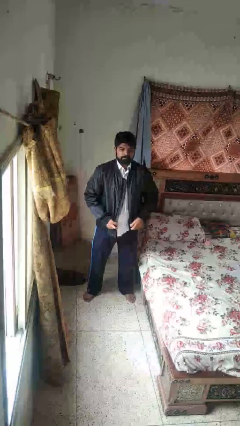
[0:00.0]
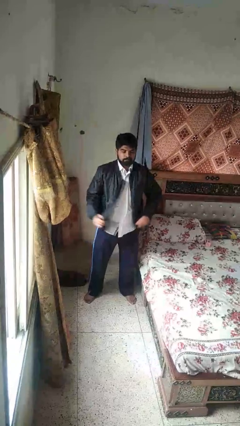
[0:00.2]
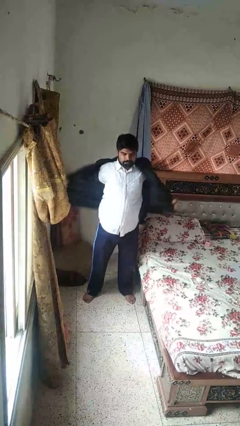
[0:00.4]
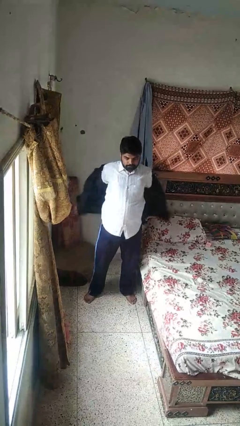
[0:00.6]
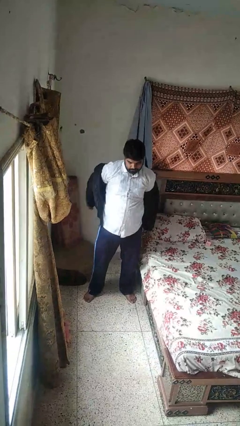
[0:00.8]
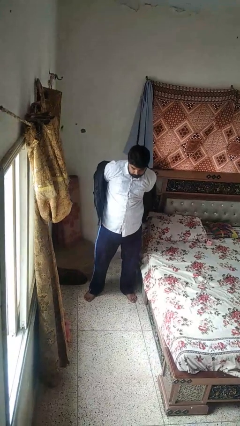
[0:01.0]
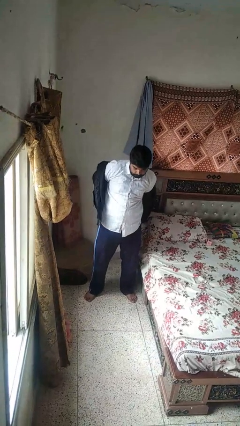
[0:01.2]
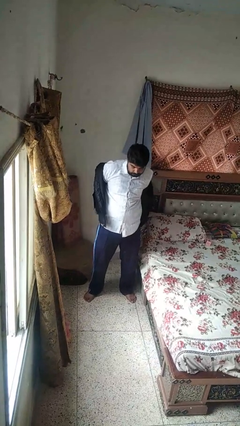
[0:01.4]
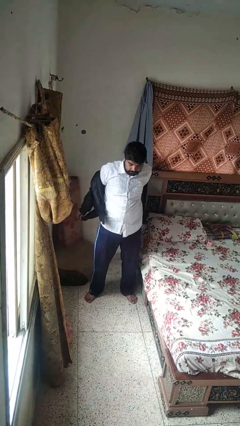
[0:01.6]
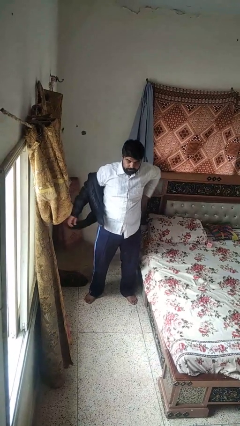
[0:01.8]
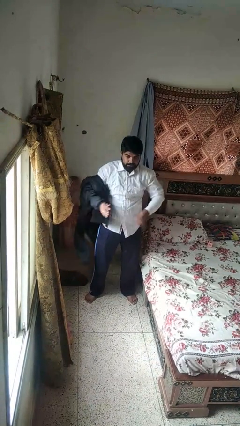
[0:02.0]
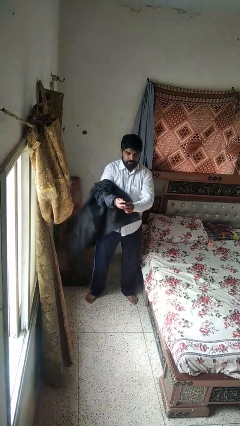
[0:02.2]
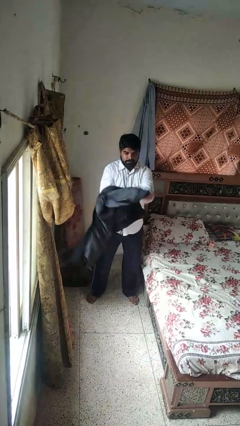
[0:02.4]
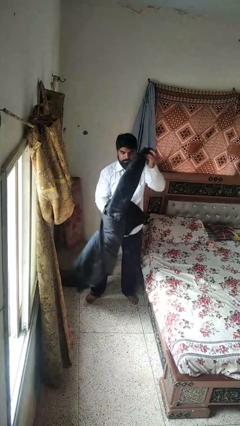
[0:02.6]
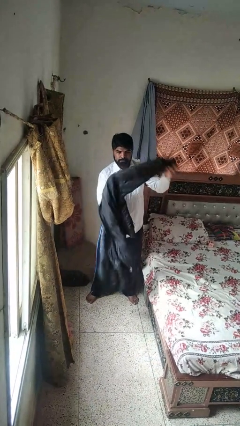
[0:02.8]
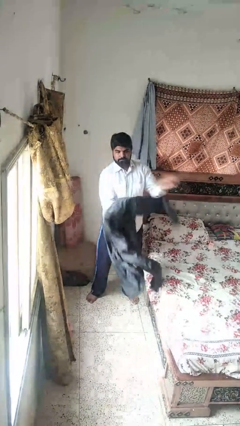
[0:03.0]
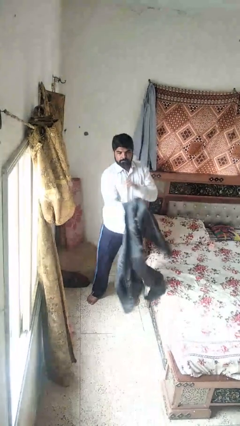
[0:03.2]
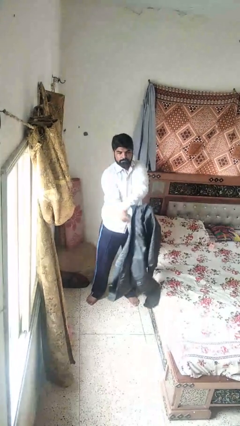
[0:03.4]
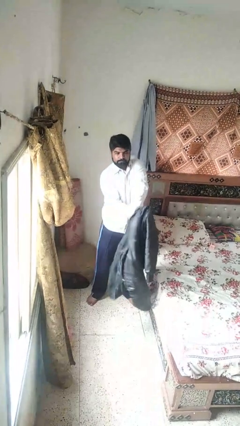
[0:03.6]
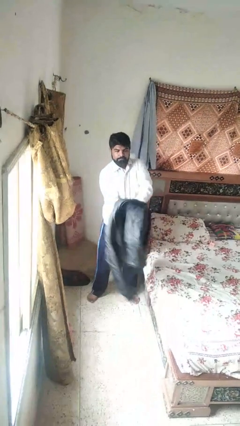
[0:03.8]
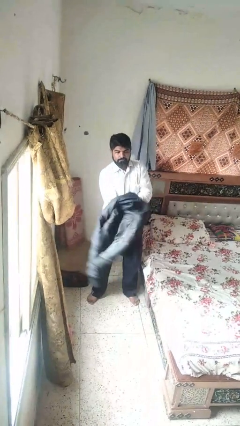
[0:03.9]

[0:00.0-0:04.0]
person takes off jacket

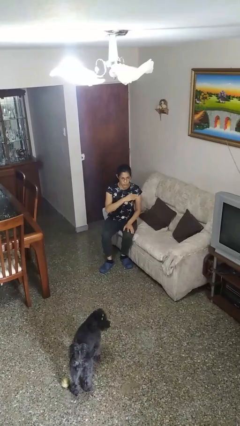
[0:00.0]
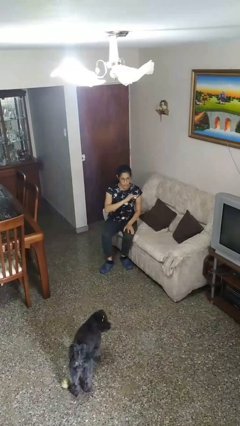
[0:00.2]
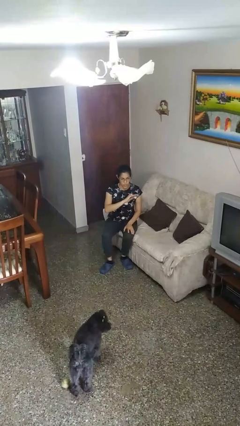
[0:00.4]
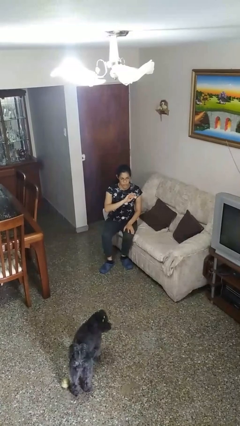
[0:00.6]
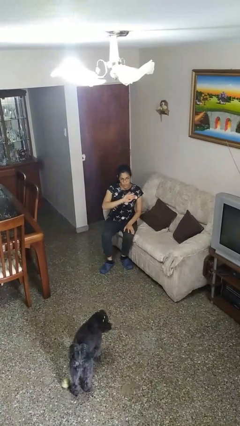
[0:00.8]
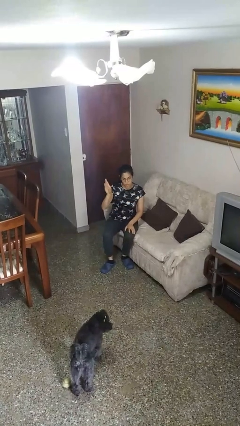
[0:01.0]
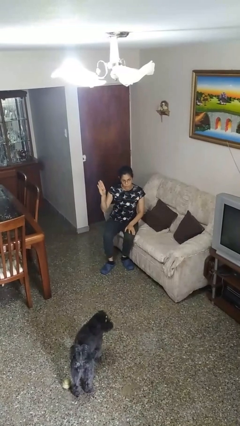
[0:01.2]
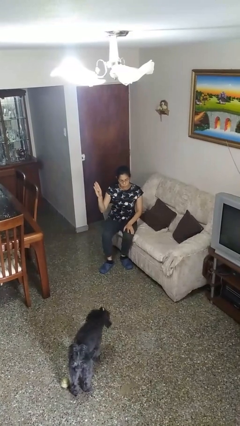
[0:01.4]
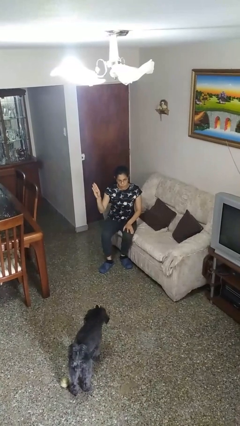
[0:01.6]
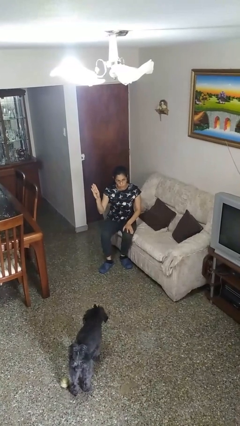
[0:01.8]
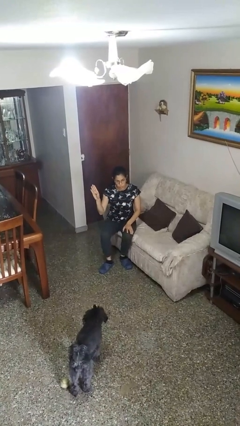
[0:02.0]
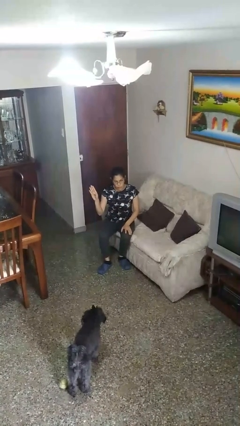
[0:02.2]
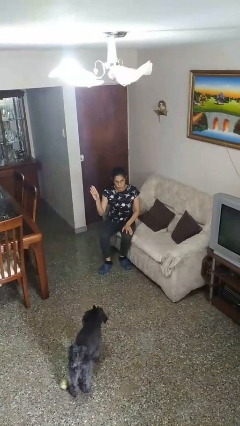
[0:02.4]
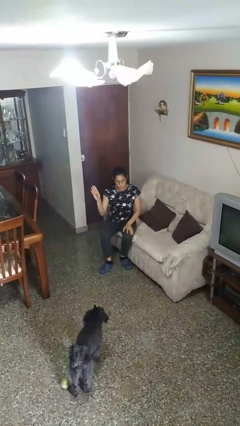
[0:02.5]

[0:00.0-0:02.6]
person gestures swipe right

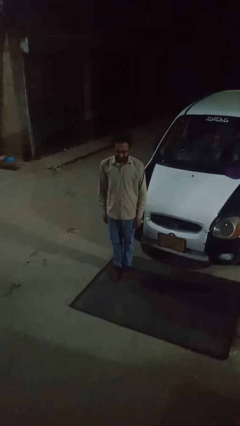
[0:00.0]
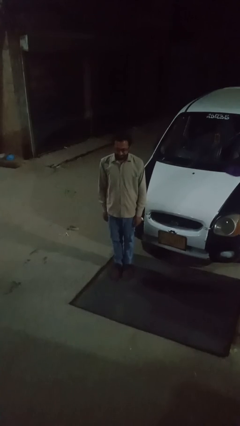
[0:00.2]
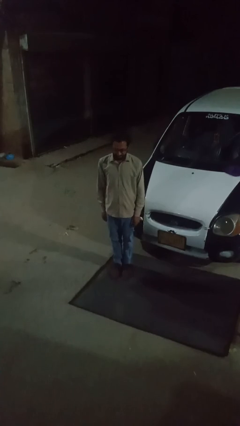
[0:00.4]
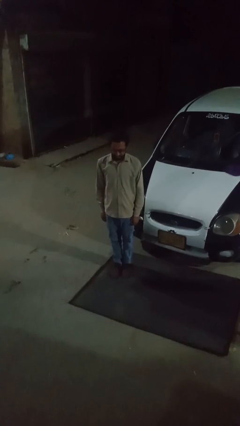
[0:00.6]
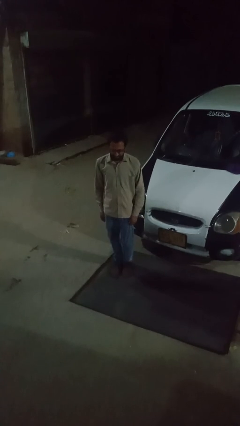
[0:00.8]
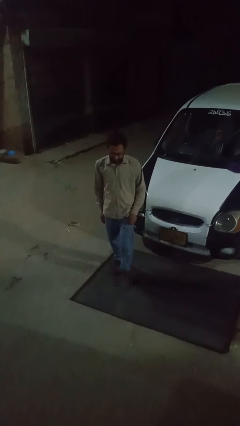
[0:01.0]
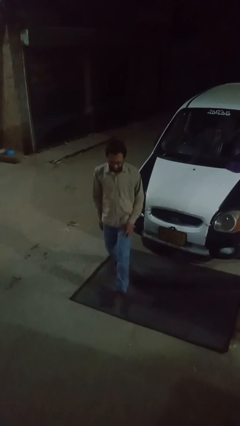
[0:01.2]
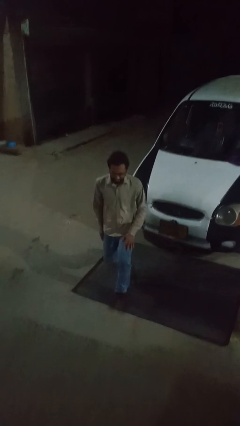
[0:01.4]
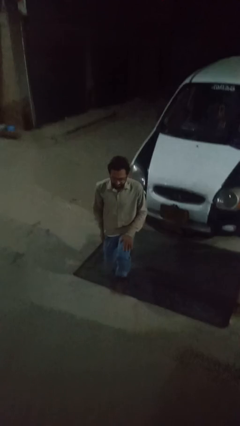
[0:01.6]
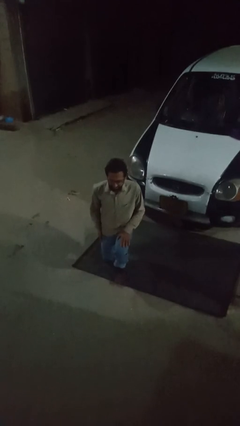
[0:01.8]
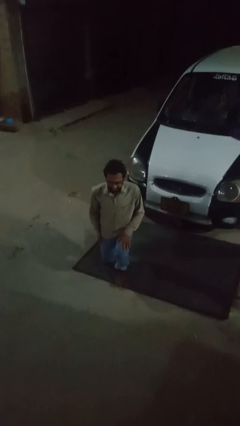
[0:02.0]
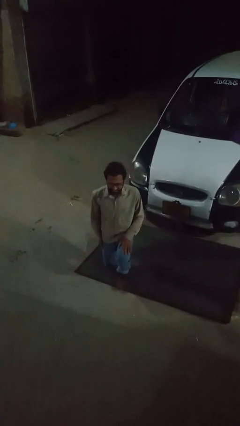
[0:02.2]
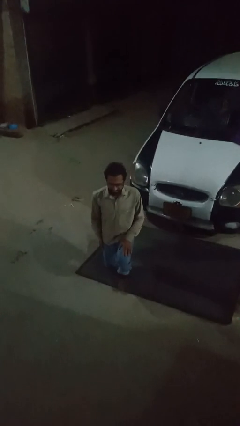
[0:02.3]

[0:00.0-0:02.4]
person squats

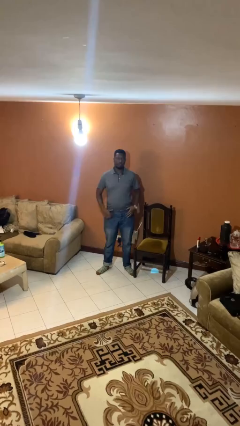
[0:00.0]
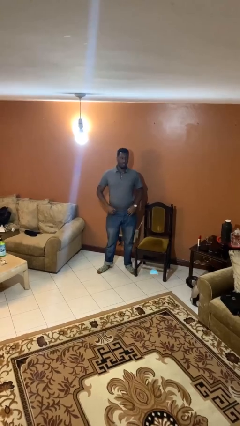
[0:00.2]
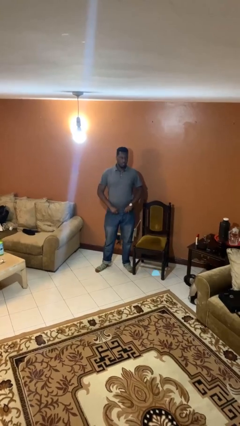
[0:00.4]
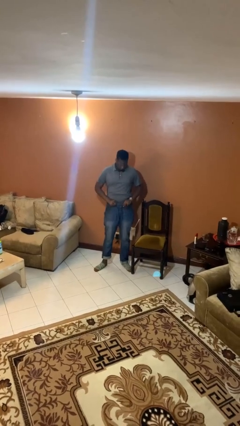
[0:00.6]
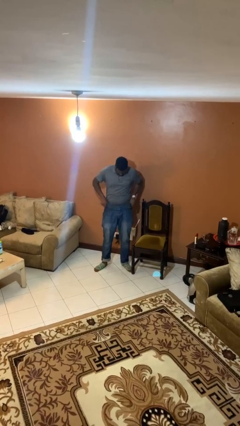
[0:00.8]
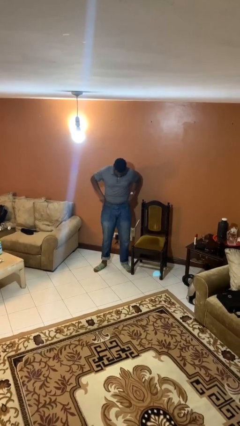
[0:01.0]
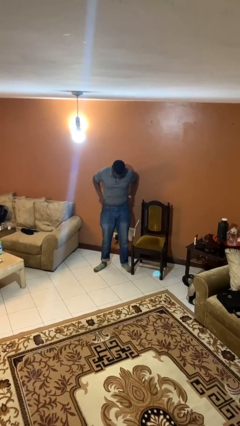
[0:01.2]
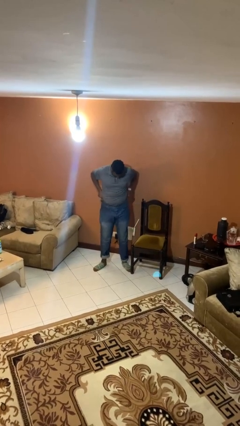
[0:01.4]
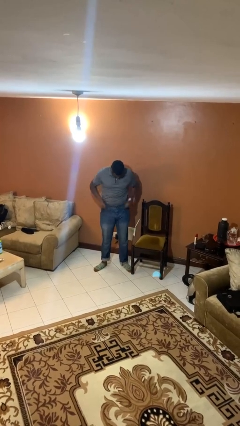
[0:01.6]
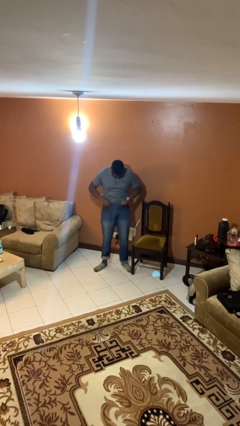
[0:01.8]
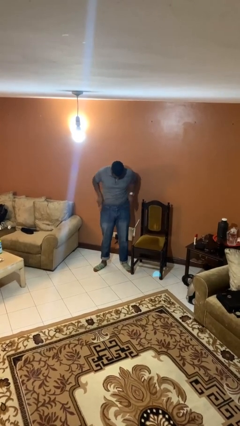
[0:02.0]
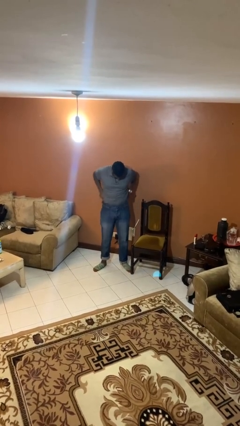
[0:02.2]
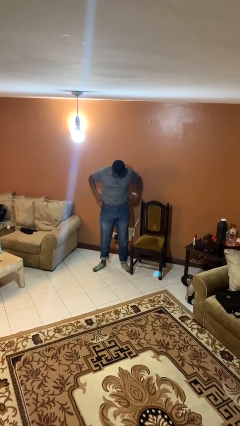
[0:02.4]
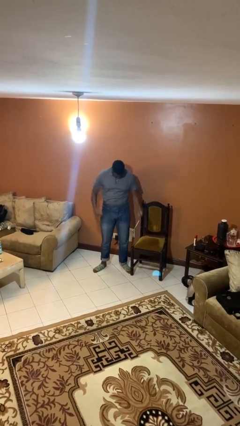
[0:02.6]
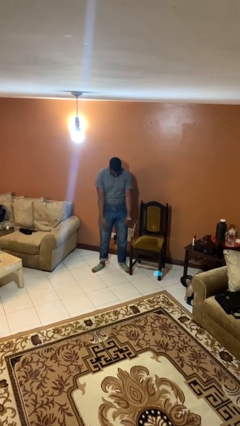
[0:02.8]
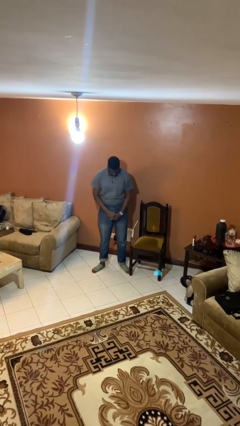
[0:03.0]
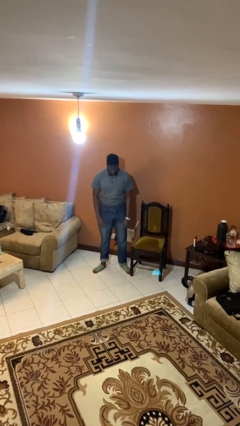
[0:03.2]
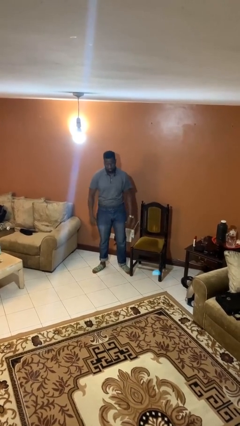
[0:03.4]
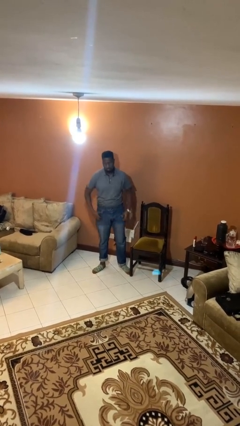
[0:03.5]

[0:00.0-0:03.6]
person hikes up pants

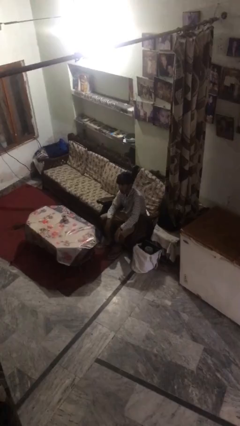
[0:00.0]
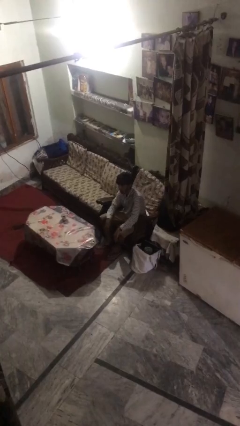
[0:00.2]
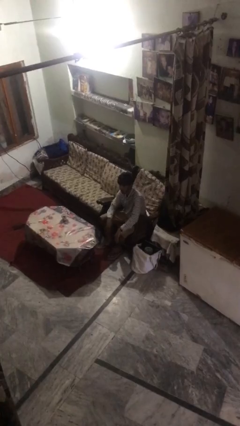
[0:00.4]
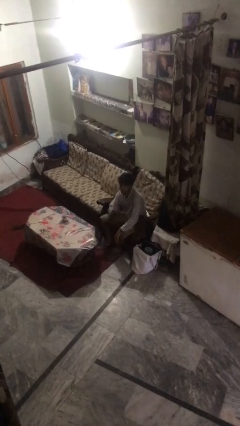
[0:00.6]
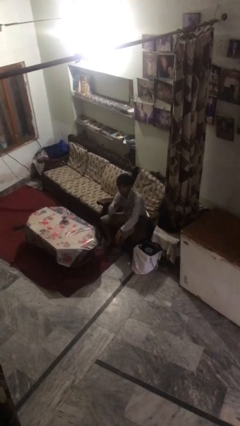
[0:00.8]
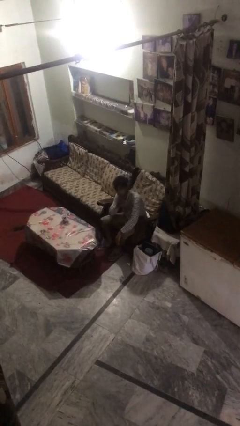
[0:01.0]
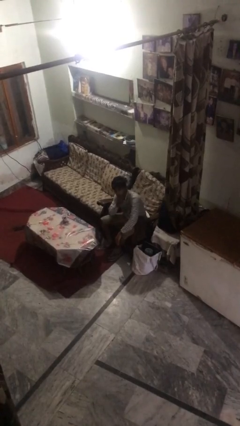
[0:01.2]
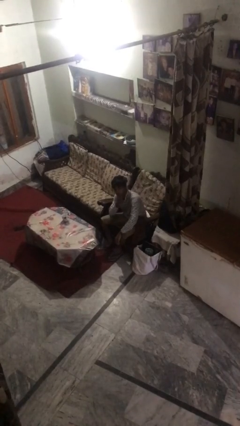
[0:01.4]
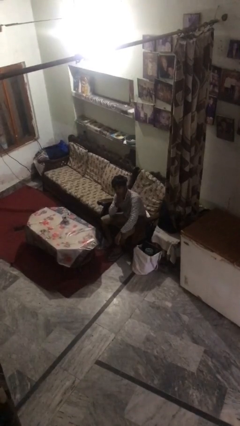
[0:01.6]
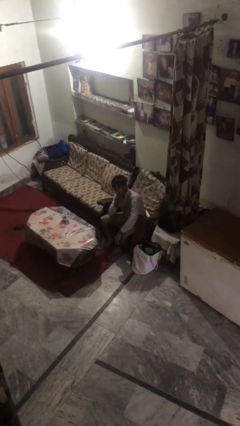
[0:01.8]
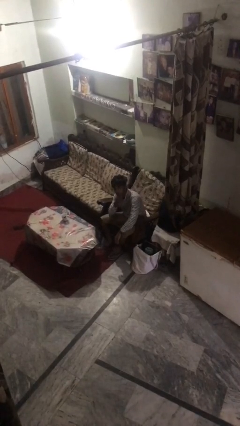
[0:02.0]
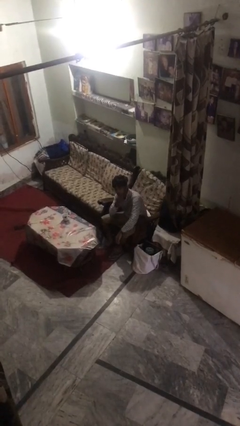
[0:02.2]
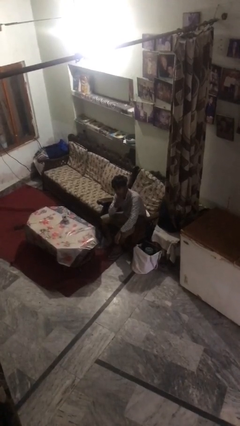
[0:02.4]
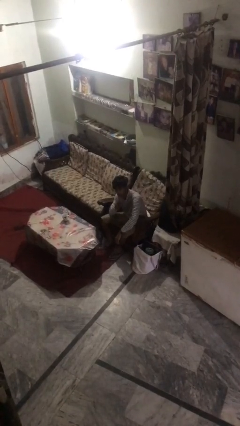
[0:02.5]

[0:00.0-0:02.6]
person strokes chin

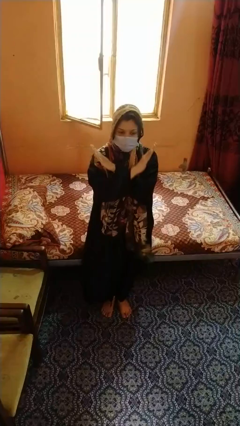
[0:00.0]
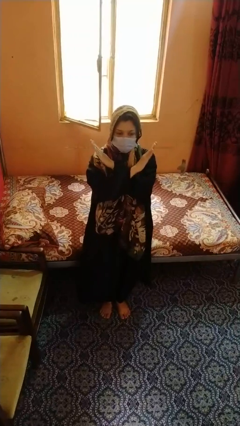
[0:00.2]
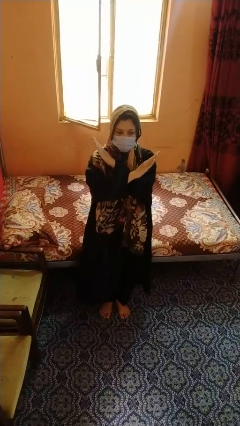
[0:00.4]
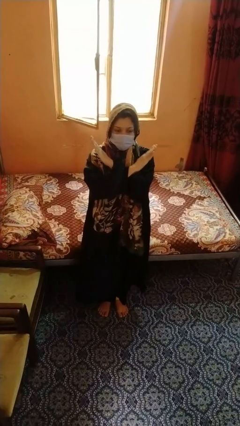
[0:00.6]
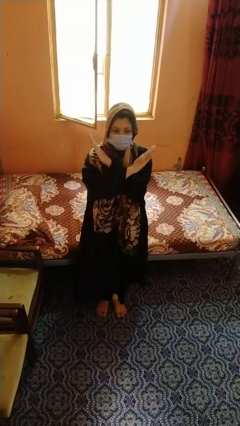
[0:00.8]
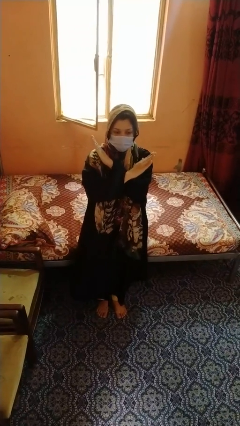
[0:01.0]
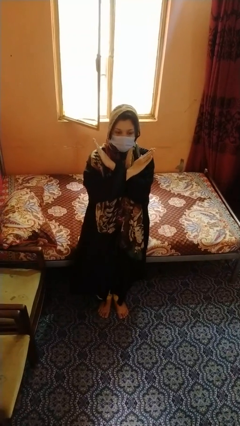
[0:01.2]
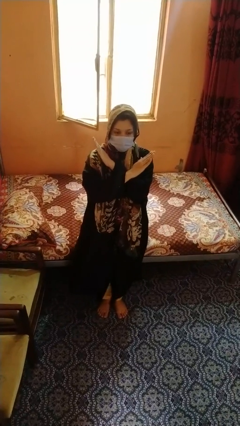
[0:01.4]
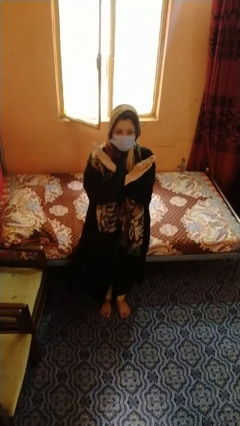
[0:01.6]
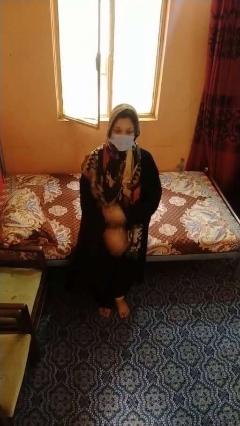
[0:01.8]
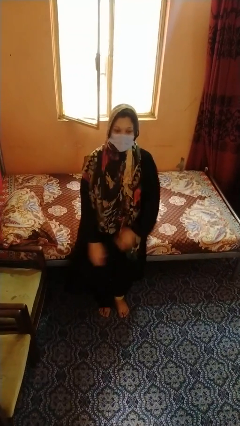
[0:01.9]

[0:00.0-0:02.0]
person gestures arms x

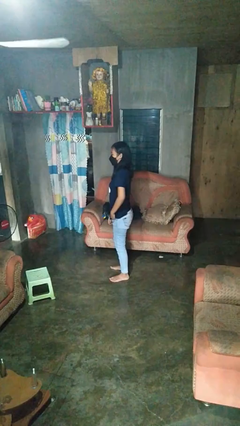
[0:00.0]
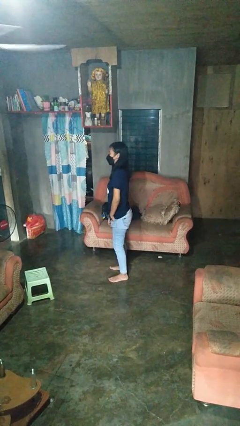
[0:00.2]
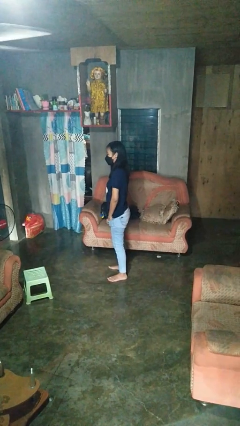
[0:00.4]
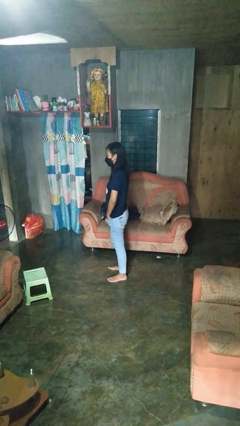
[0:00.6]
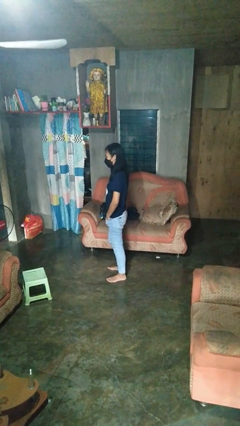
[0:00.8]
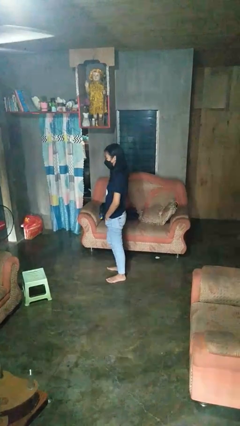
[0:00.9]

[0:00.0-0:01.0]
person puts hands in back pockets
